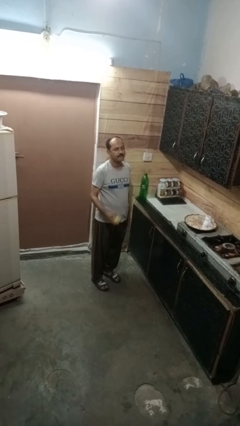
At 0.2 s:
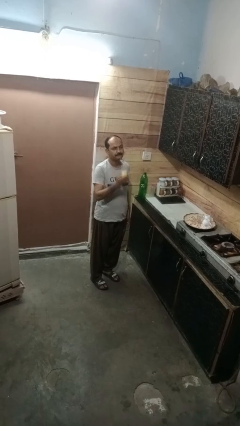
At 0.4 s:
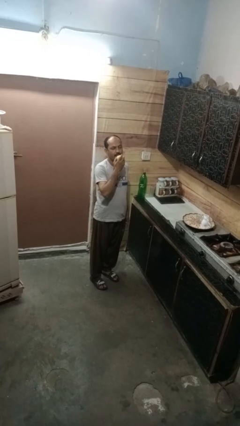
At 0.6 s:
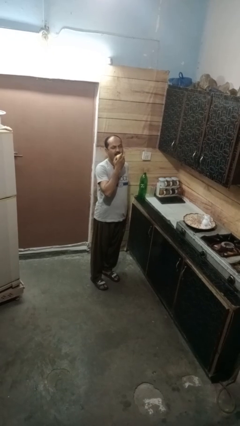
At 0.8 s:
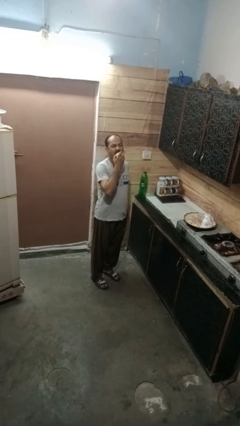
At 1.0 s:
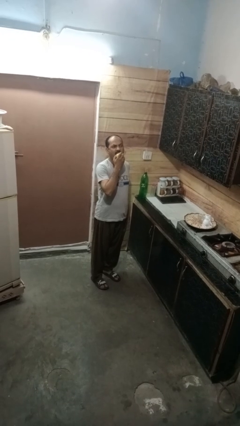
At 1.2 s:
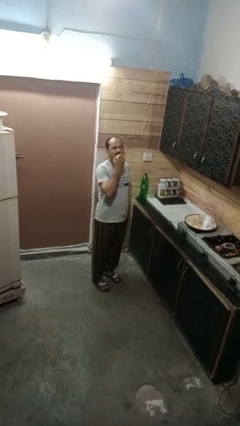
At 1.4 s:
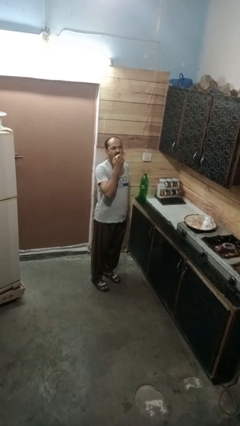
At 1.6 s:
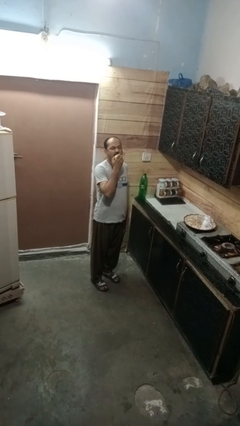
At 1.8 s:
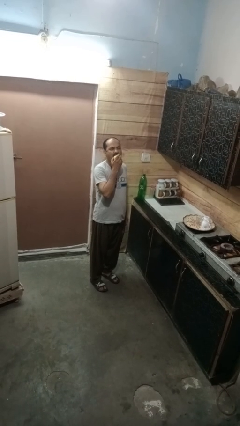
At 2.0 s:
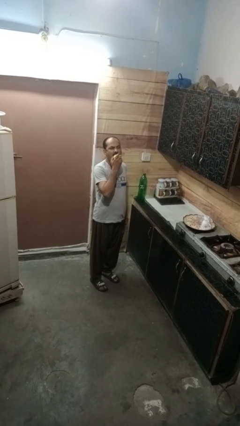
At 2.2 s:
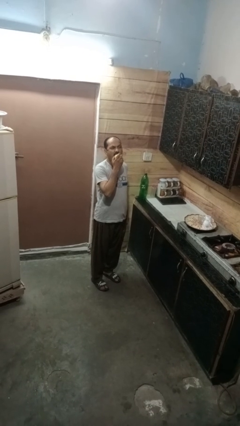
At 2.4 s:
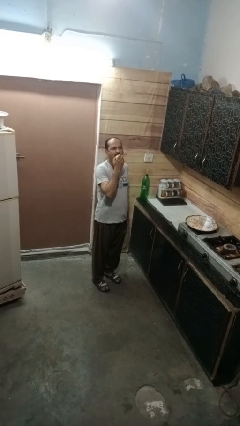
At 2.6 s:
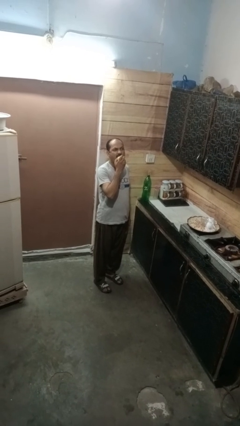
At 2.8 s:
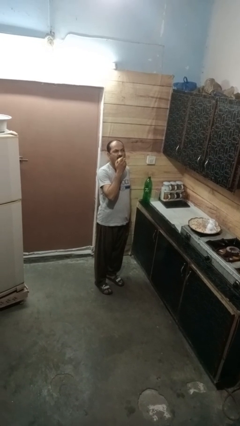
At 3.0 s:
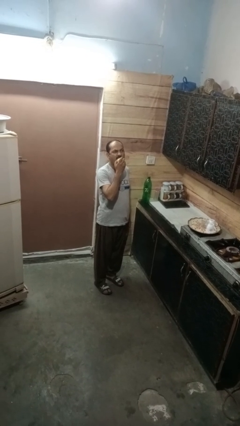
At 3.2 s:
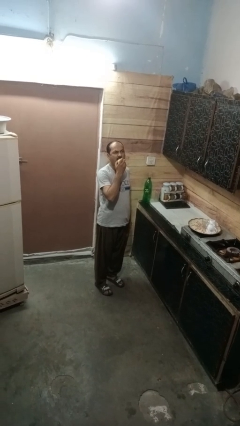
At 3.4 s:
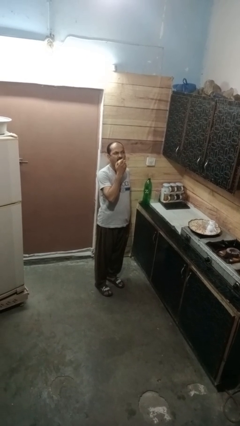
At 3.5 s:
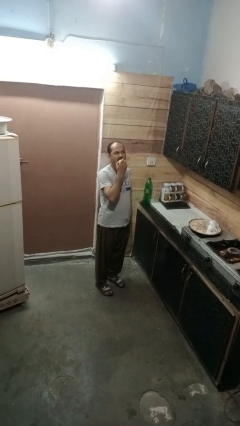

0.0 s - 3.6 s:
person eats apple

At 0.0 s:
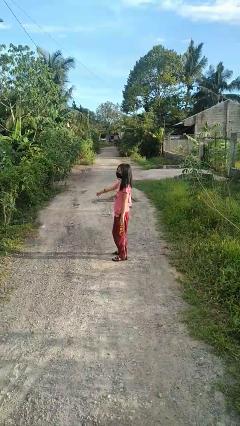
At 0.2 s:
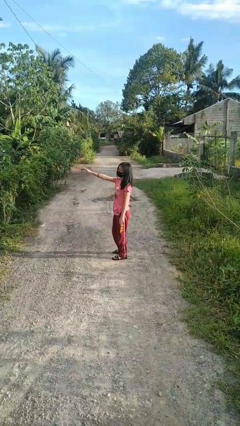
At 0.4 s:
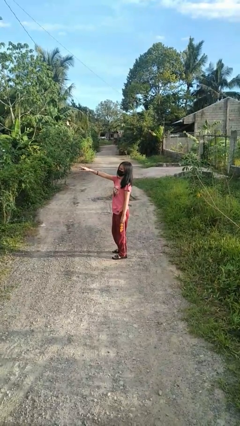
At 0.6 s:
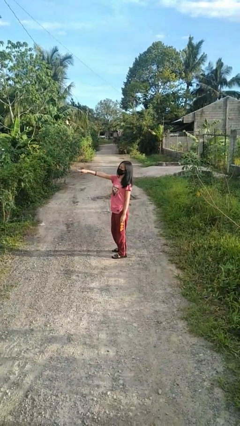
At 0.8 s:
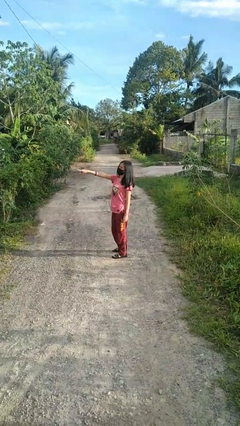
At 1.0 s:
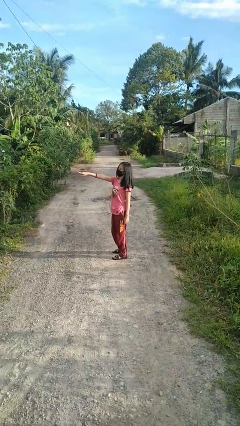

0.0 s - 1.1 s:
person points at person

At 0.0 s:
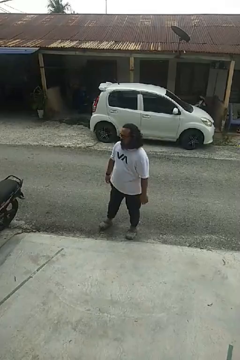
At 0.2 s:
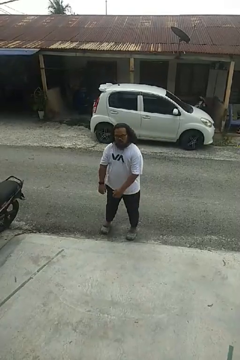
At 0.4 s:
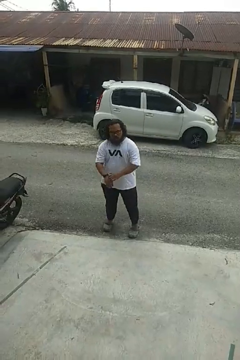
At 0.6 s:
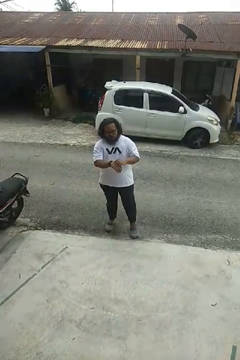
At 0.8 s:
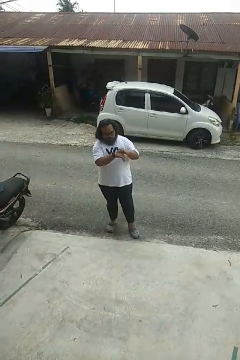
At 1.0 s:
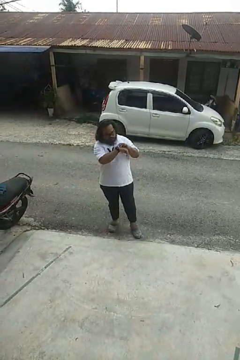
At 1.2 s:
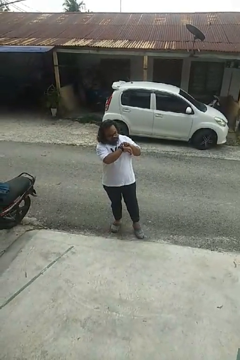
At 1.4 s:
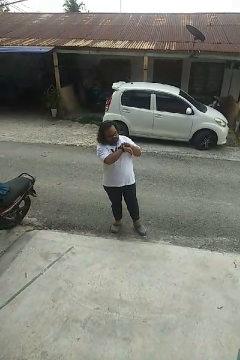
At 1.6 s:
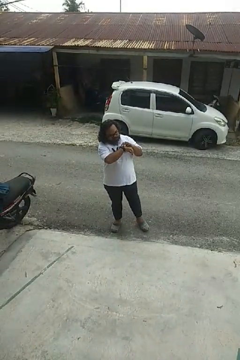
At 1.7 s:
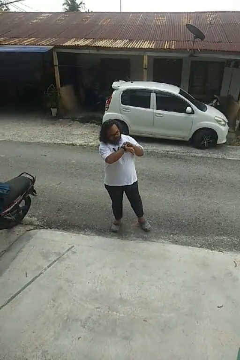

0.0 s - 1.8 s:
person looks at wristwatch

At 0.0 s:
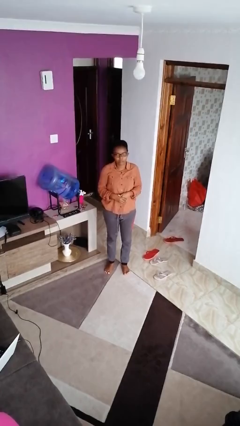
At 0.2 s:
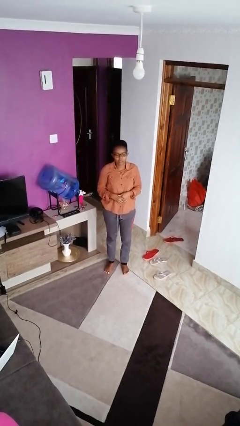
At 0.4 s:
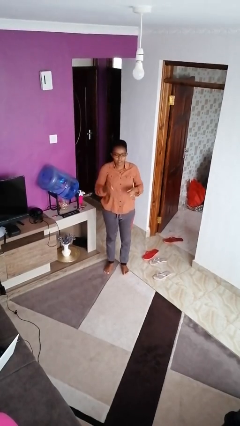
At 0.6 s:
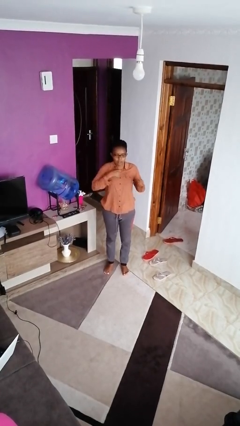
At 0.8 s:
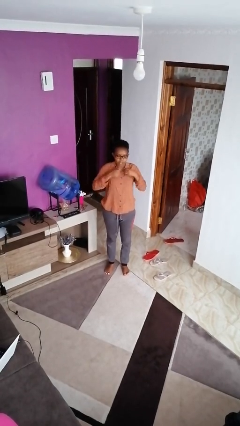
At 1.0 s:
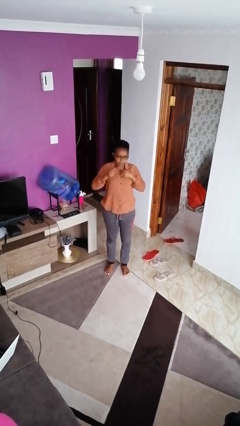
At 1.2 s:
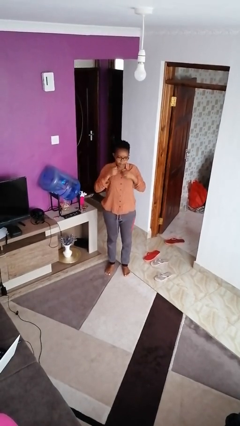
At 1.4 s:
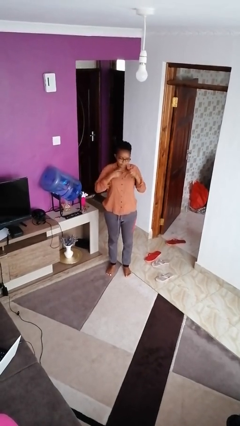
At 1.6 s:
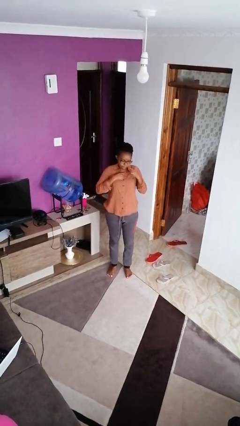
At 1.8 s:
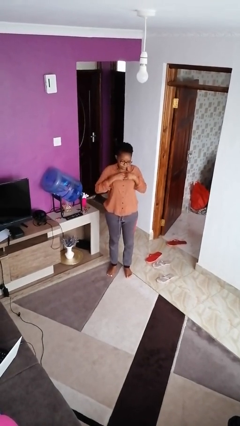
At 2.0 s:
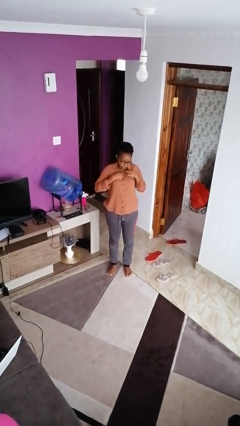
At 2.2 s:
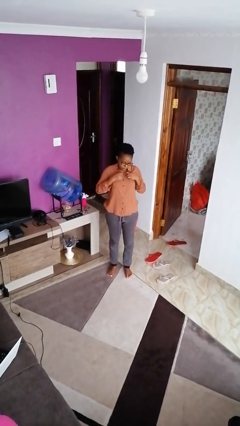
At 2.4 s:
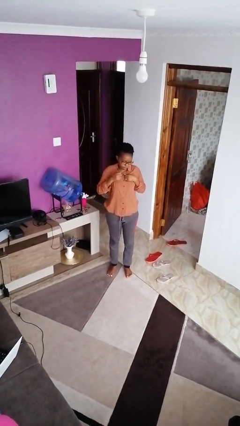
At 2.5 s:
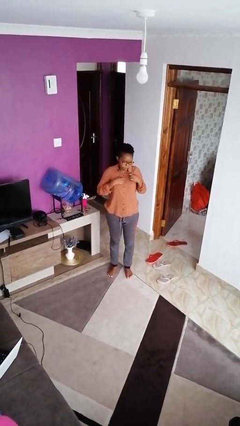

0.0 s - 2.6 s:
person drums on chest

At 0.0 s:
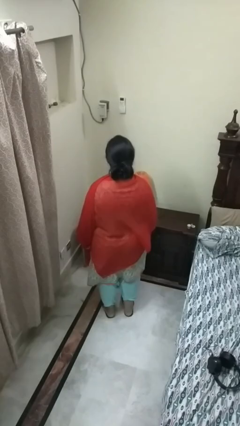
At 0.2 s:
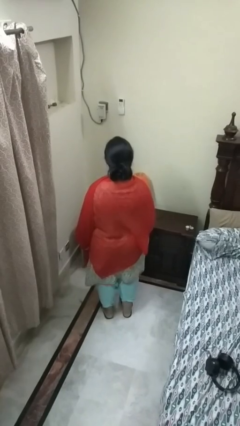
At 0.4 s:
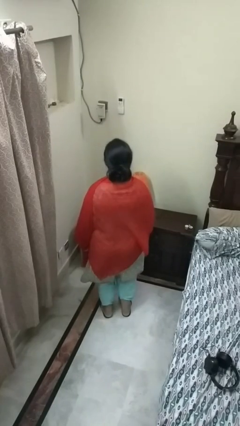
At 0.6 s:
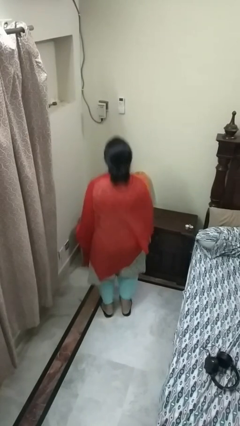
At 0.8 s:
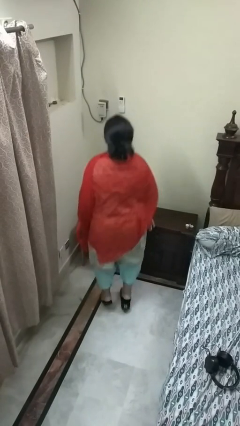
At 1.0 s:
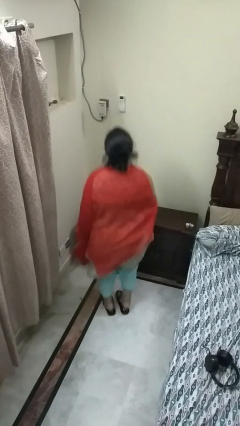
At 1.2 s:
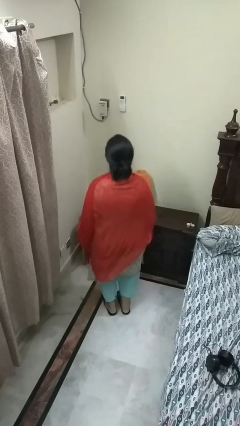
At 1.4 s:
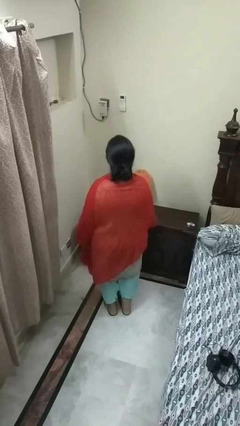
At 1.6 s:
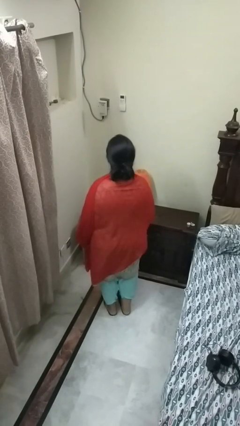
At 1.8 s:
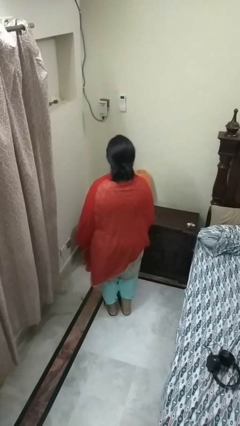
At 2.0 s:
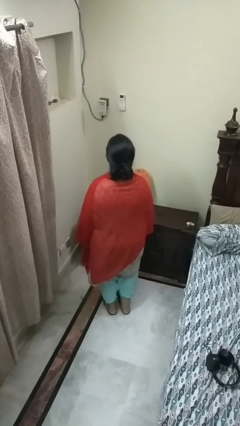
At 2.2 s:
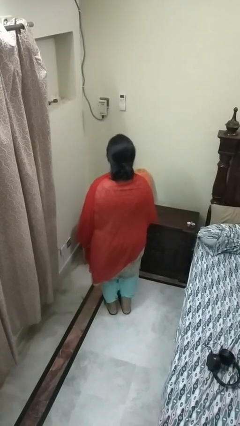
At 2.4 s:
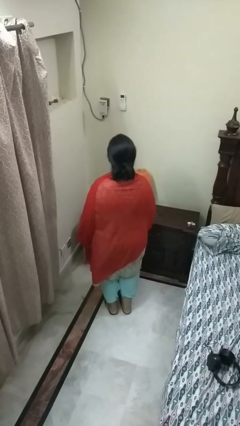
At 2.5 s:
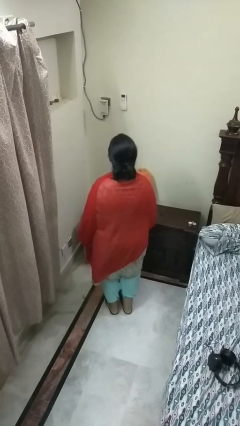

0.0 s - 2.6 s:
person jumps

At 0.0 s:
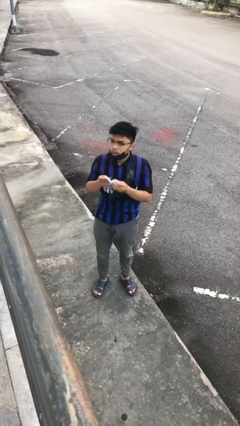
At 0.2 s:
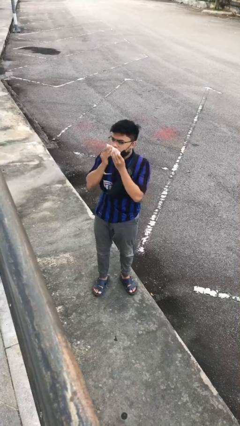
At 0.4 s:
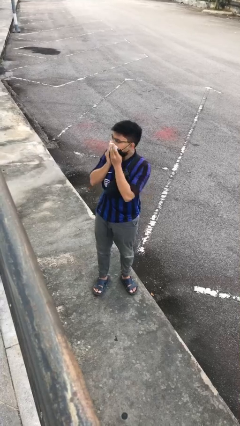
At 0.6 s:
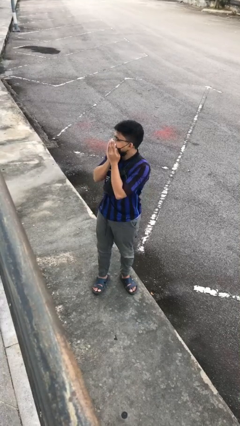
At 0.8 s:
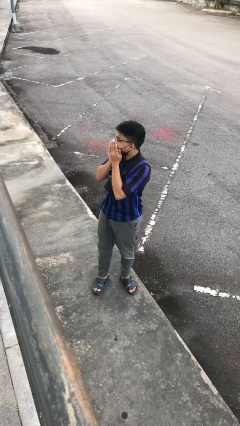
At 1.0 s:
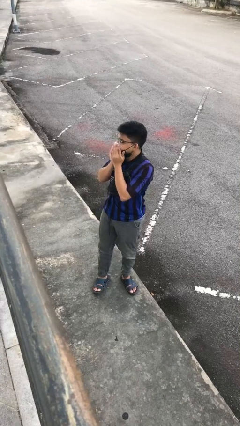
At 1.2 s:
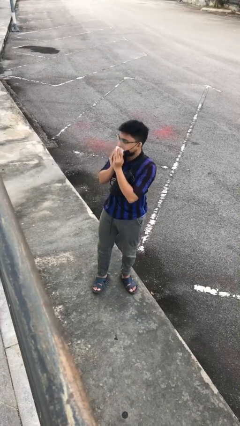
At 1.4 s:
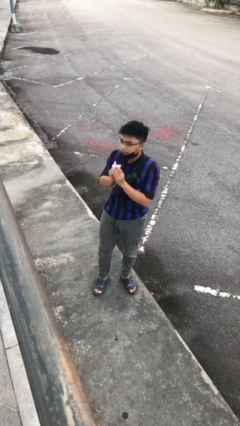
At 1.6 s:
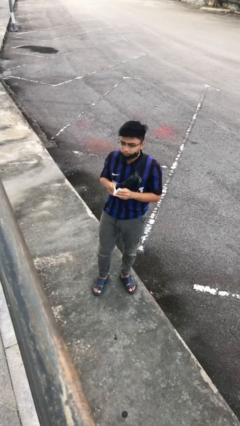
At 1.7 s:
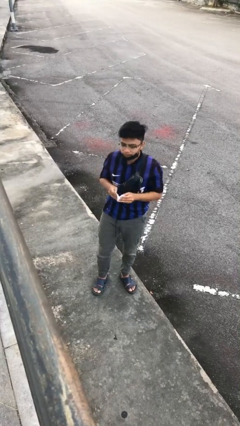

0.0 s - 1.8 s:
person blows nose

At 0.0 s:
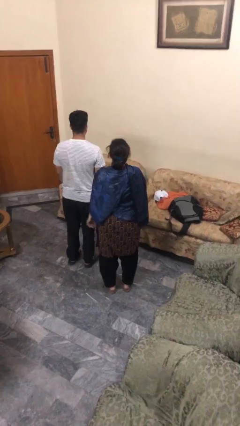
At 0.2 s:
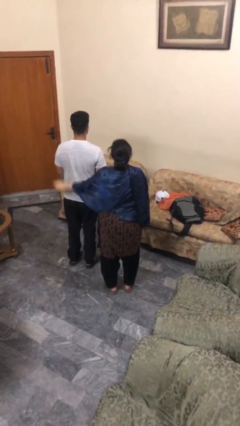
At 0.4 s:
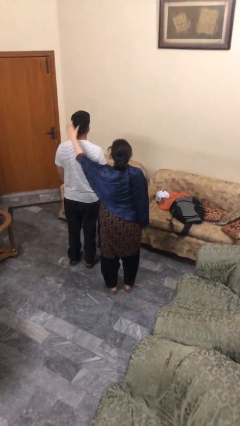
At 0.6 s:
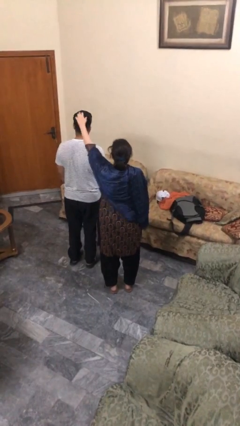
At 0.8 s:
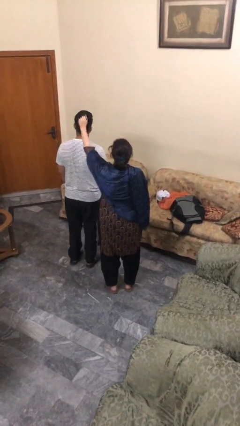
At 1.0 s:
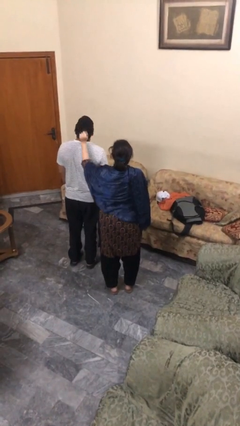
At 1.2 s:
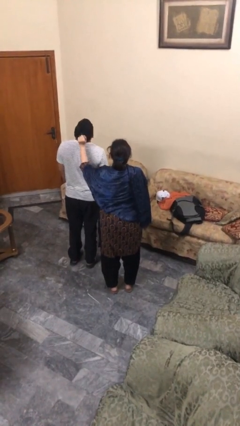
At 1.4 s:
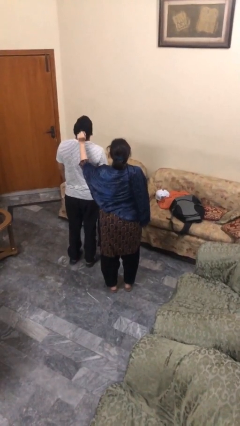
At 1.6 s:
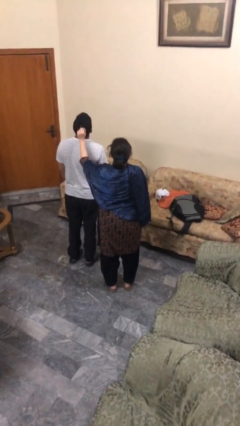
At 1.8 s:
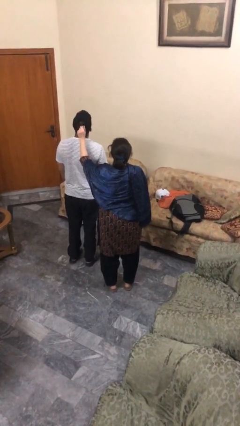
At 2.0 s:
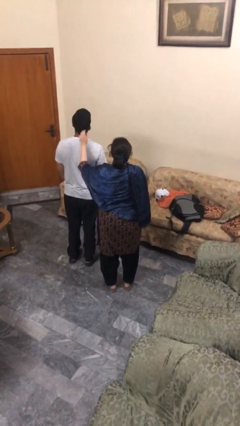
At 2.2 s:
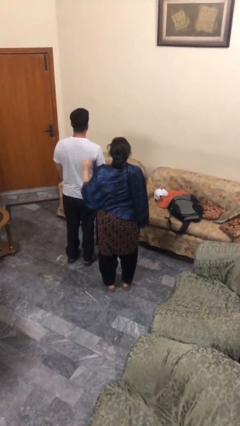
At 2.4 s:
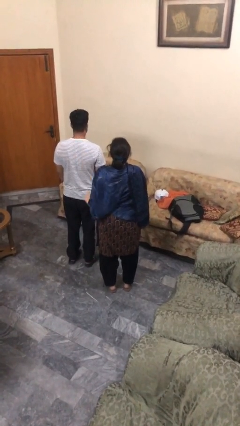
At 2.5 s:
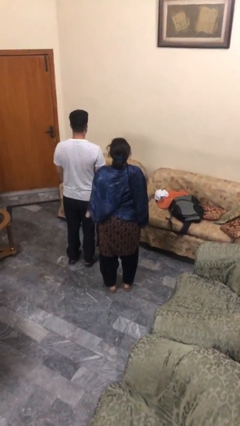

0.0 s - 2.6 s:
person grabs person by hair

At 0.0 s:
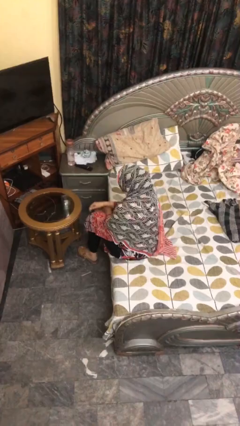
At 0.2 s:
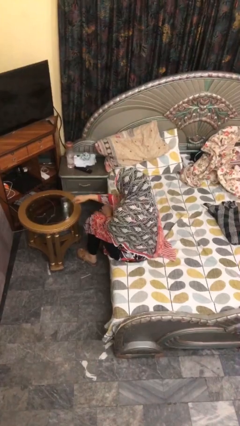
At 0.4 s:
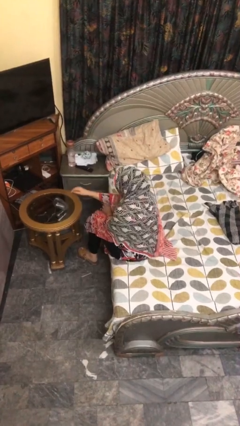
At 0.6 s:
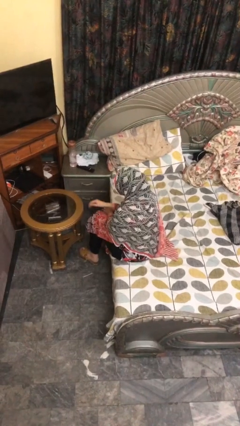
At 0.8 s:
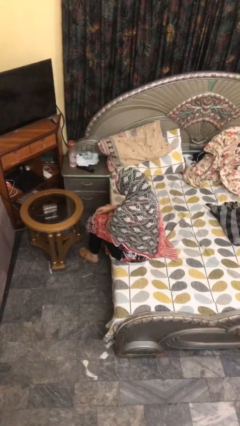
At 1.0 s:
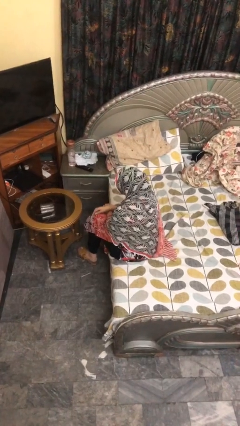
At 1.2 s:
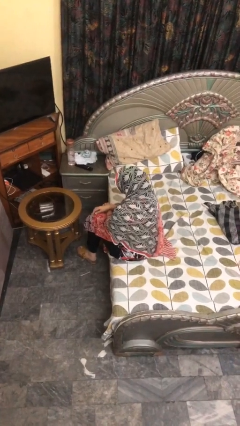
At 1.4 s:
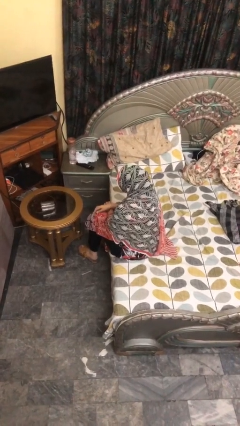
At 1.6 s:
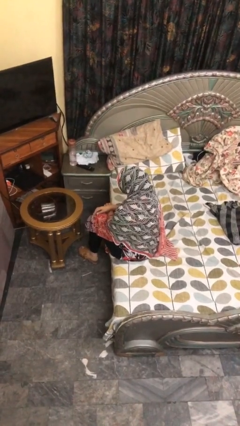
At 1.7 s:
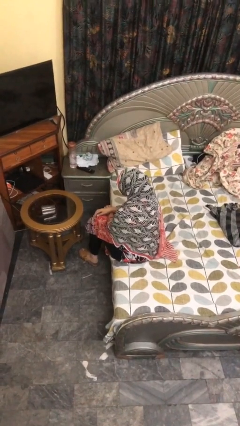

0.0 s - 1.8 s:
person knocks over glass
